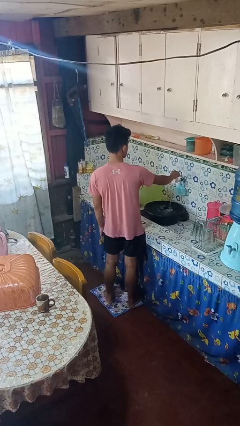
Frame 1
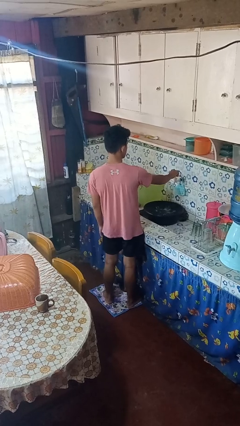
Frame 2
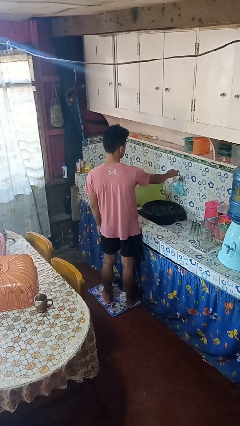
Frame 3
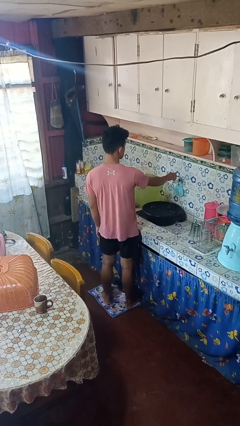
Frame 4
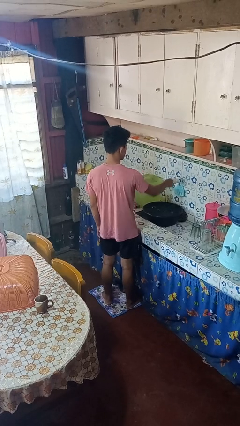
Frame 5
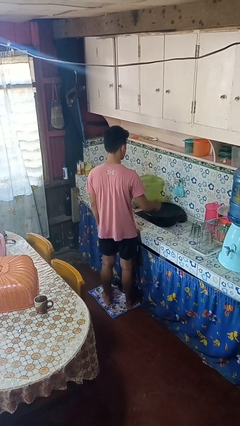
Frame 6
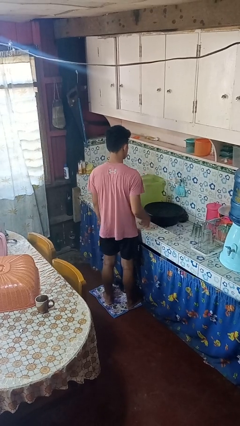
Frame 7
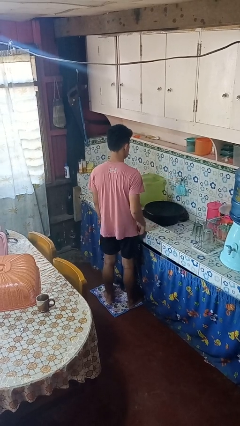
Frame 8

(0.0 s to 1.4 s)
person turns off faucet

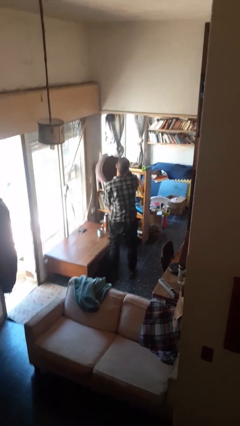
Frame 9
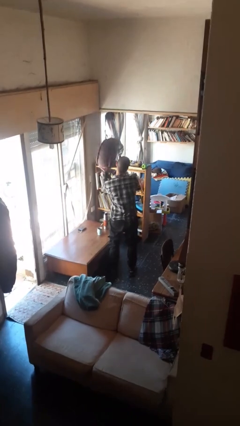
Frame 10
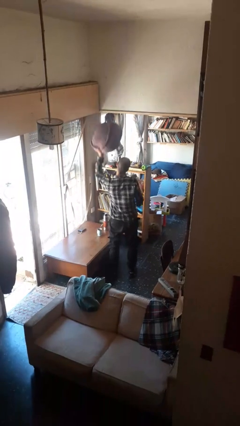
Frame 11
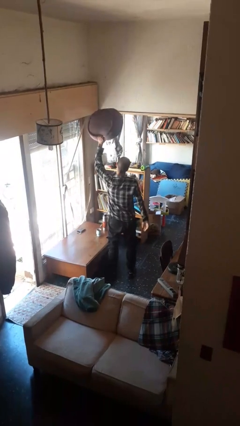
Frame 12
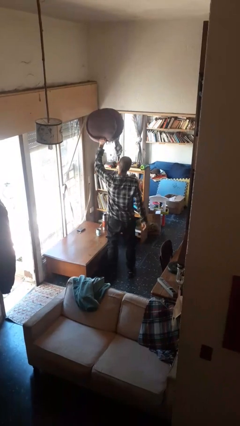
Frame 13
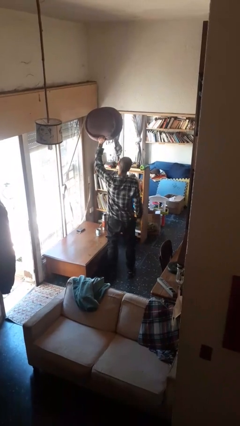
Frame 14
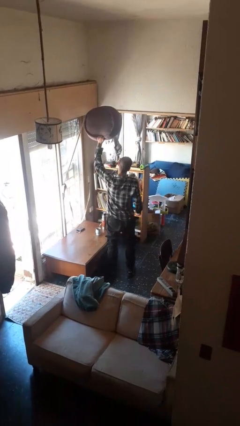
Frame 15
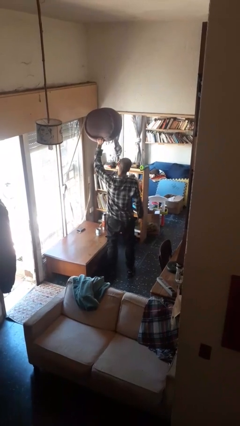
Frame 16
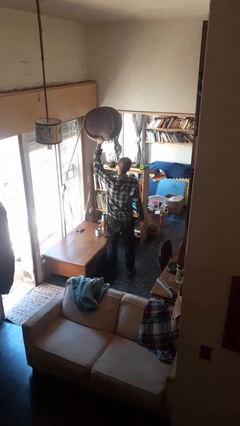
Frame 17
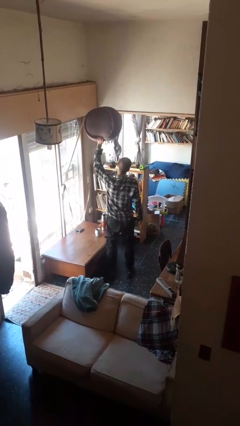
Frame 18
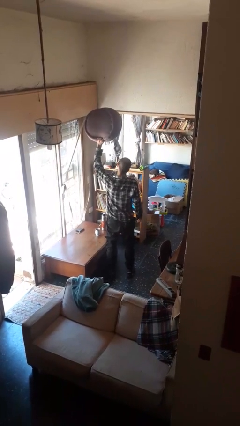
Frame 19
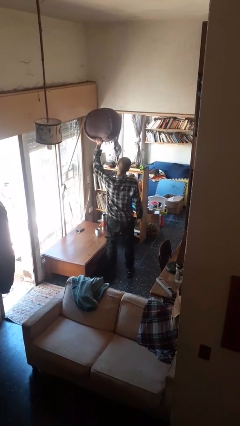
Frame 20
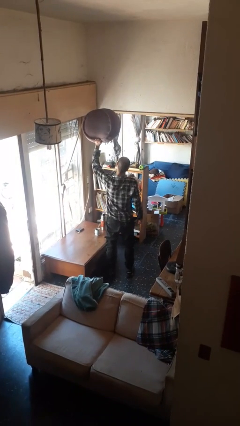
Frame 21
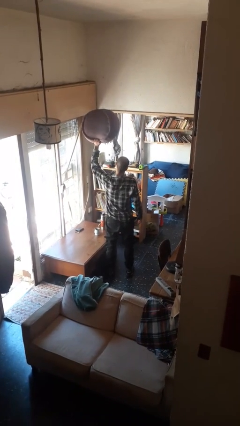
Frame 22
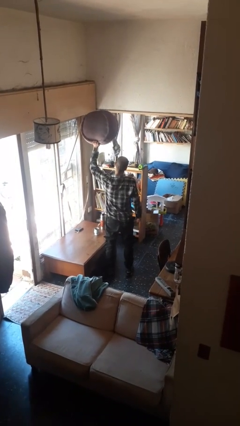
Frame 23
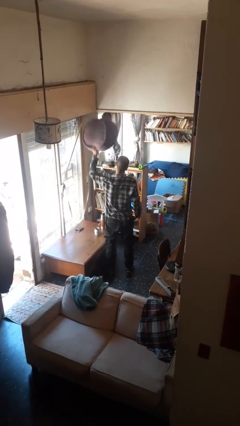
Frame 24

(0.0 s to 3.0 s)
person holds object above head

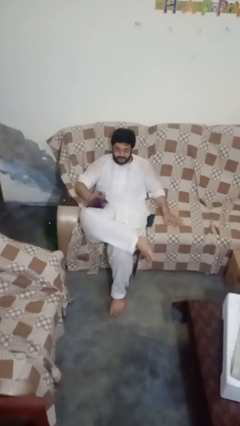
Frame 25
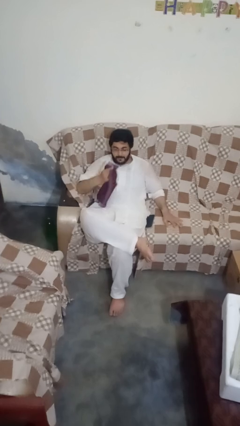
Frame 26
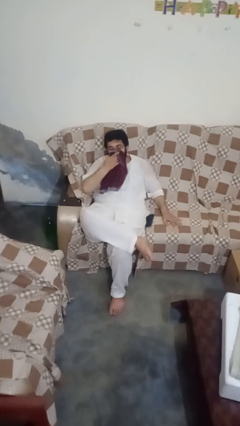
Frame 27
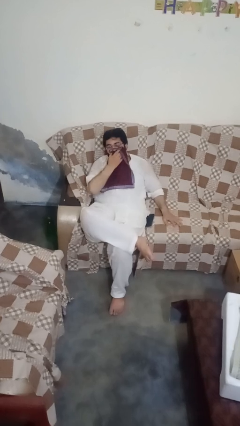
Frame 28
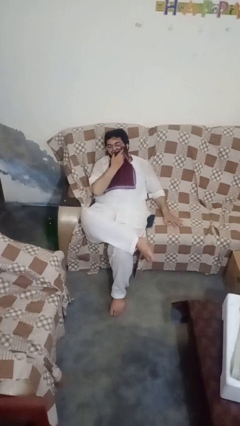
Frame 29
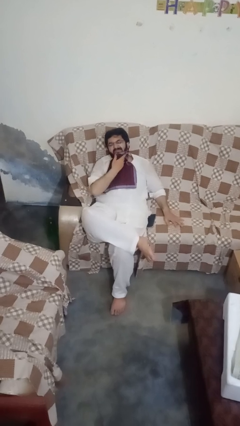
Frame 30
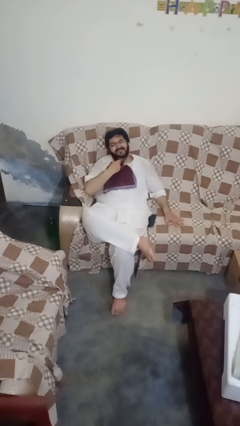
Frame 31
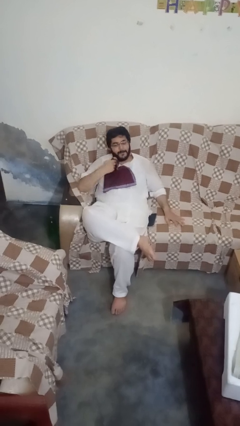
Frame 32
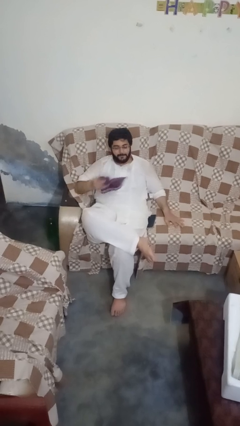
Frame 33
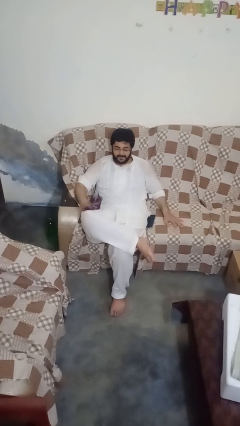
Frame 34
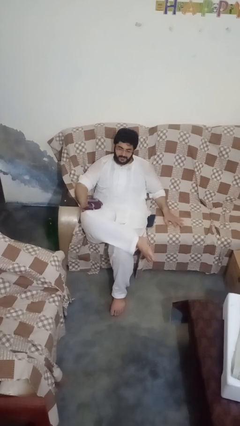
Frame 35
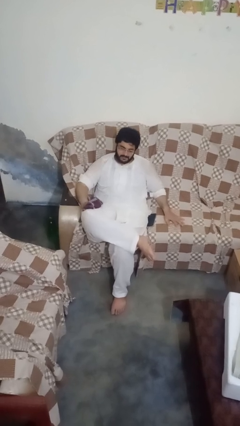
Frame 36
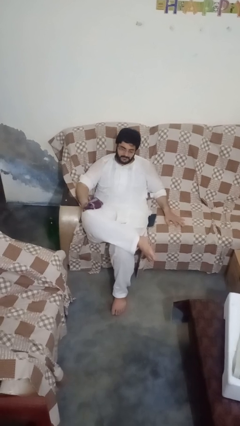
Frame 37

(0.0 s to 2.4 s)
person wipes mouth with napkin

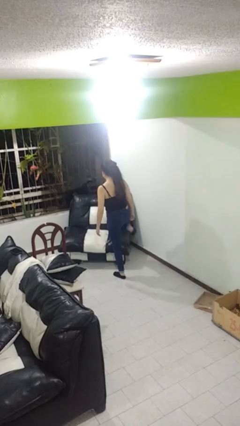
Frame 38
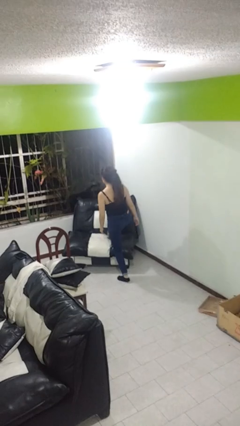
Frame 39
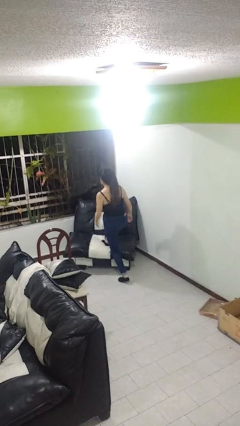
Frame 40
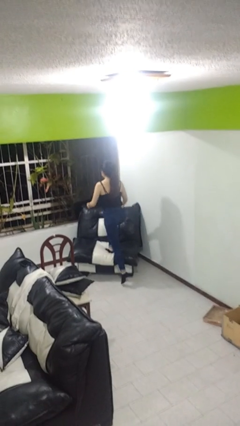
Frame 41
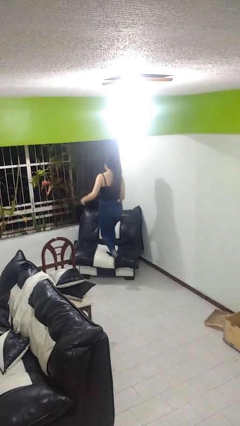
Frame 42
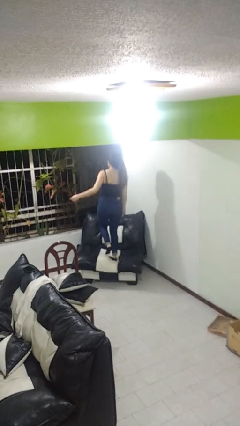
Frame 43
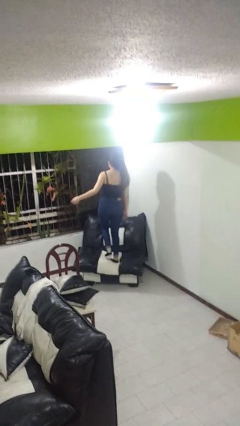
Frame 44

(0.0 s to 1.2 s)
person climbs on couch

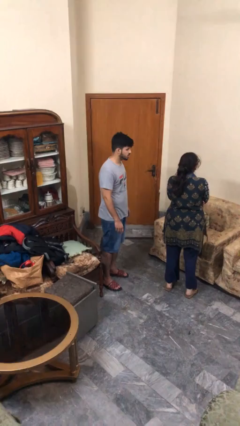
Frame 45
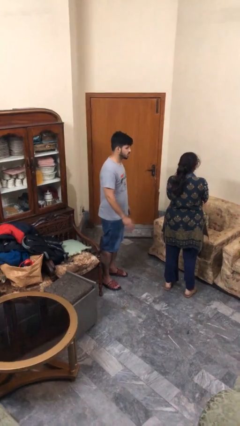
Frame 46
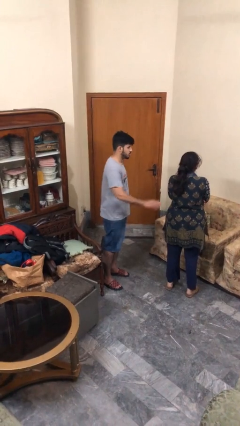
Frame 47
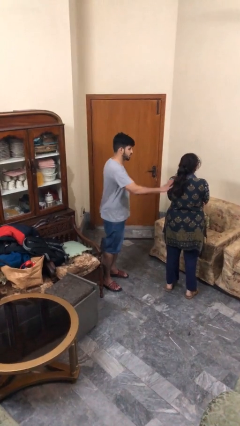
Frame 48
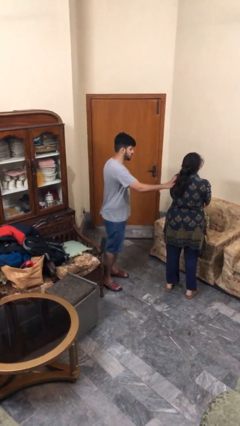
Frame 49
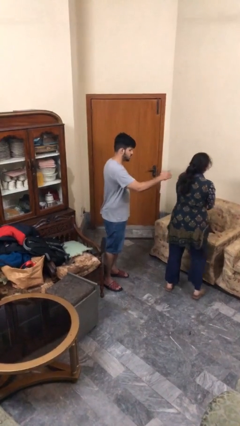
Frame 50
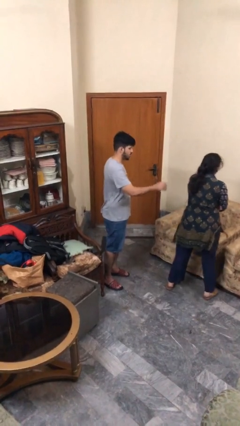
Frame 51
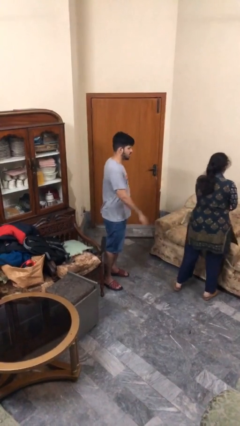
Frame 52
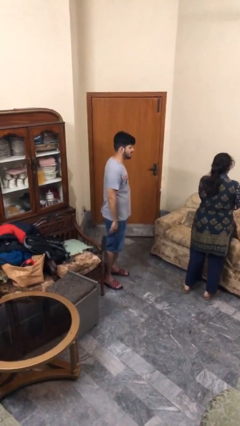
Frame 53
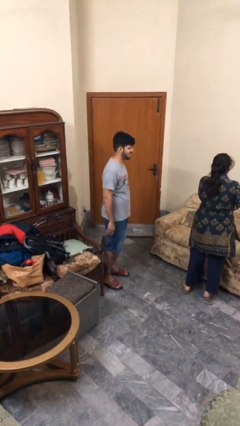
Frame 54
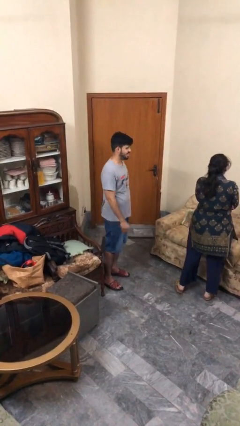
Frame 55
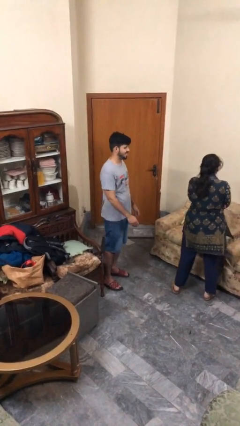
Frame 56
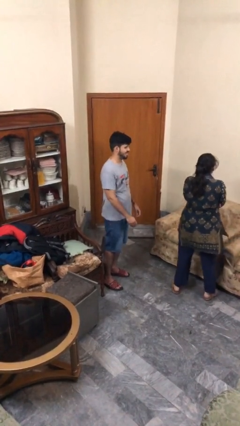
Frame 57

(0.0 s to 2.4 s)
person shoves person

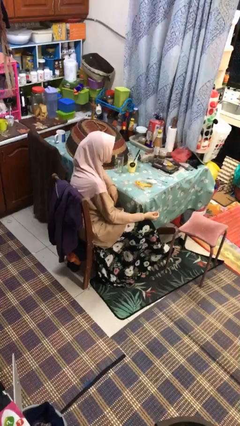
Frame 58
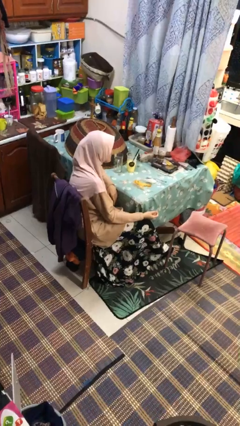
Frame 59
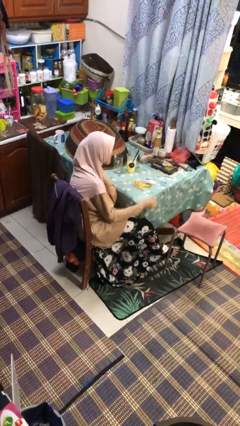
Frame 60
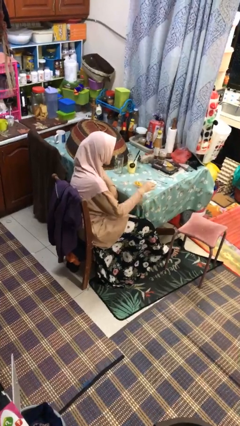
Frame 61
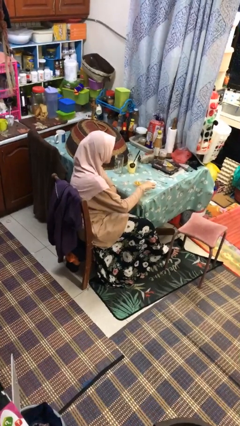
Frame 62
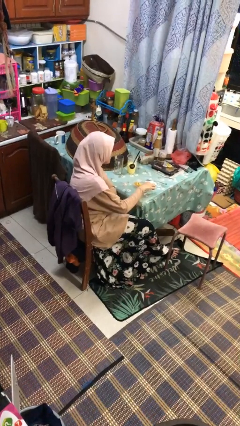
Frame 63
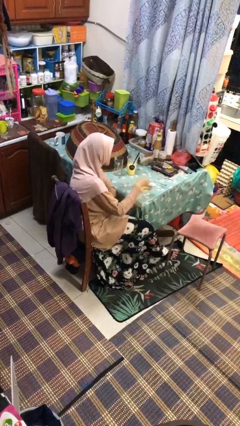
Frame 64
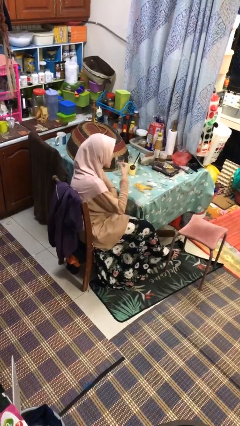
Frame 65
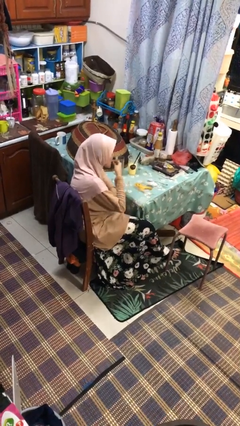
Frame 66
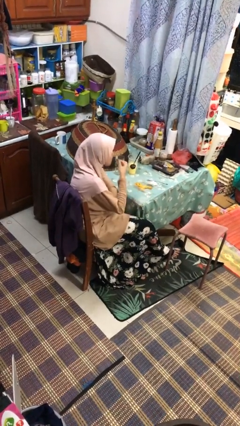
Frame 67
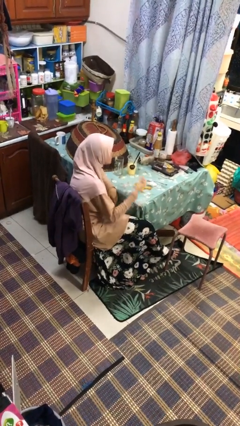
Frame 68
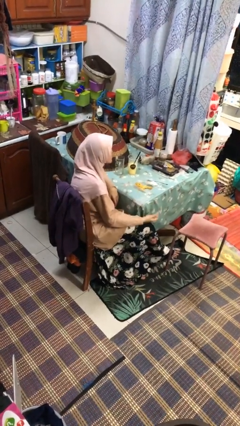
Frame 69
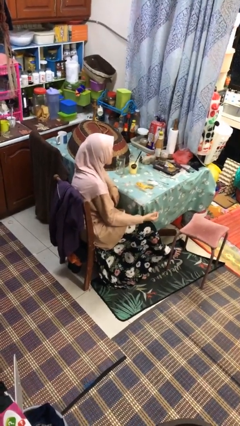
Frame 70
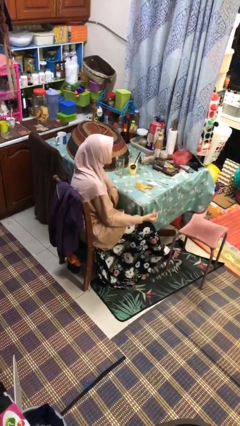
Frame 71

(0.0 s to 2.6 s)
person eats with hands

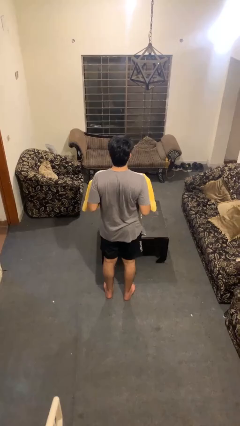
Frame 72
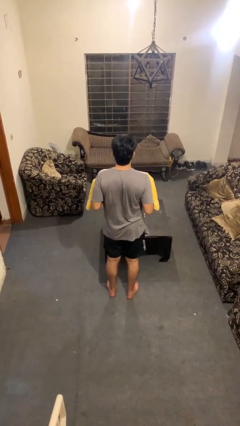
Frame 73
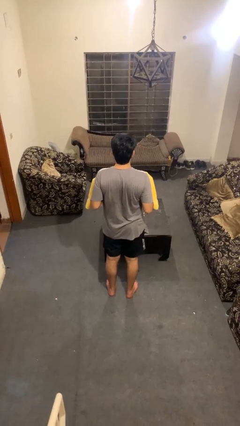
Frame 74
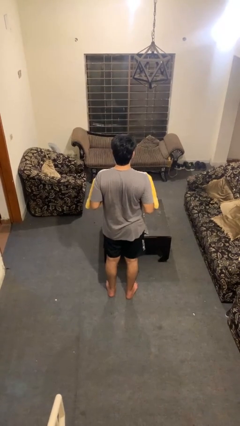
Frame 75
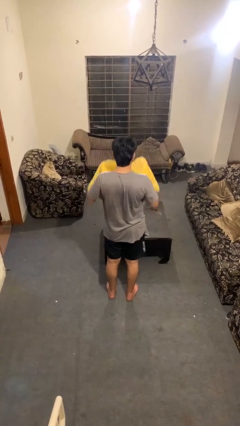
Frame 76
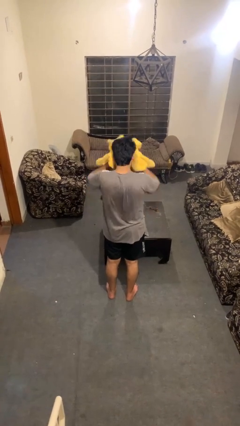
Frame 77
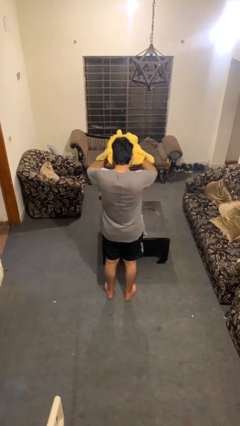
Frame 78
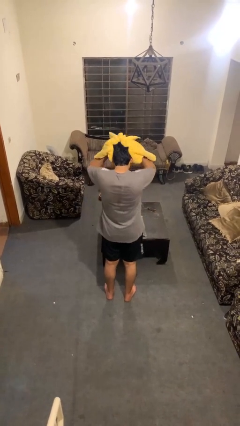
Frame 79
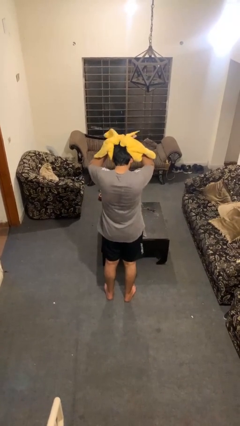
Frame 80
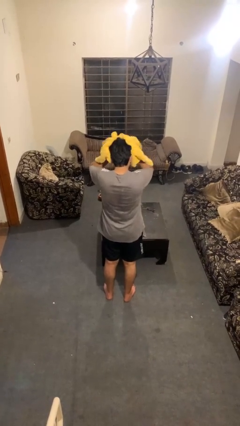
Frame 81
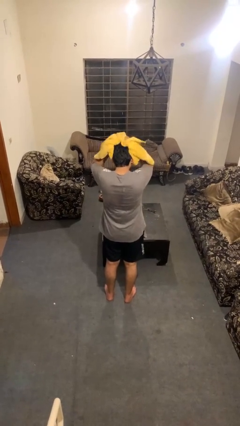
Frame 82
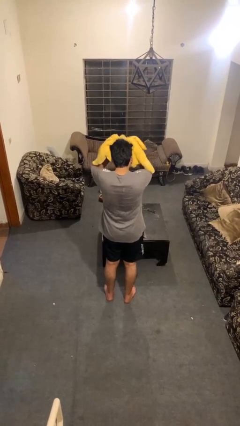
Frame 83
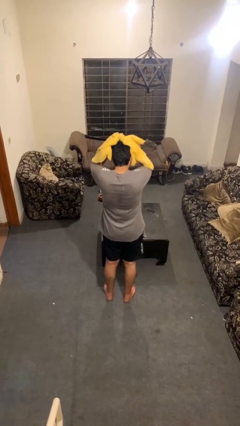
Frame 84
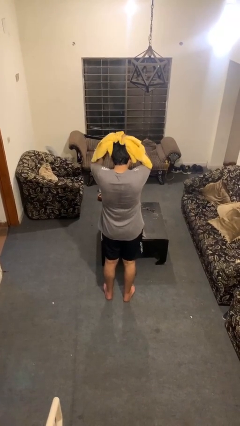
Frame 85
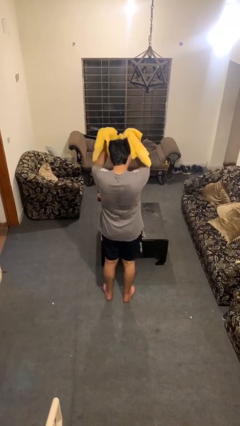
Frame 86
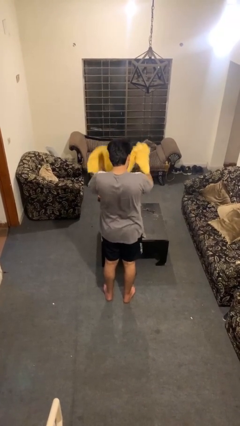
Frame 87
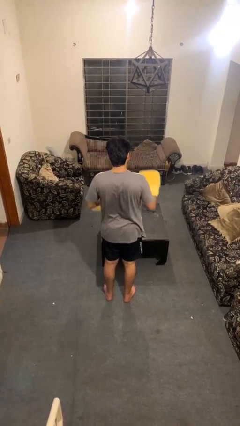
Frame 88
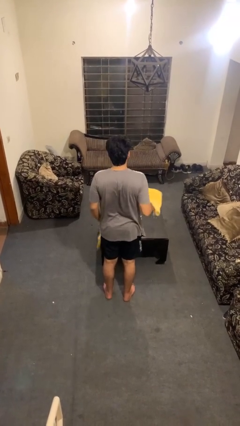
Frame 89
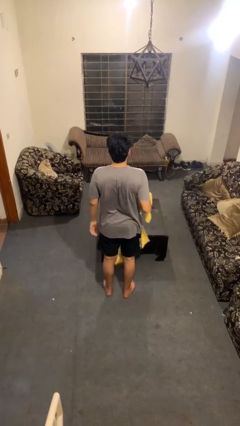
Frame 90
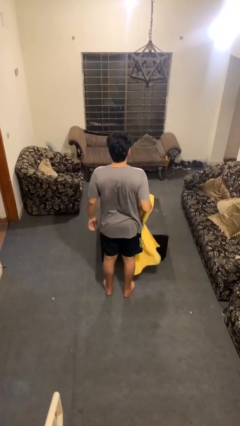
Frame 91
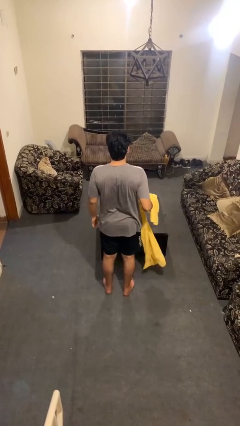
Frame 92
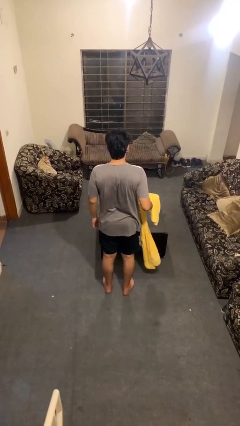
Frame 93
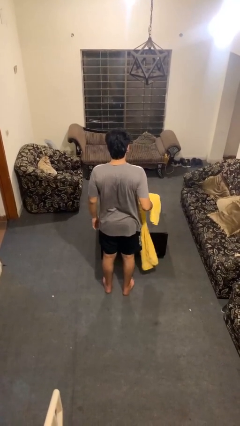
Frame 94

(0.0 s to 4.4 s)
person dries hair with towel
